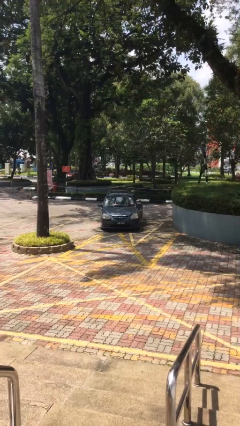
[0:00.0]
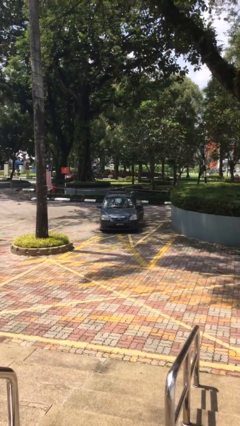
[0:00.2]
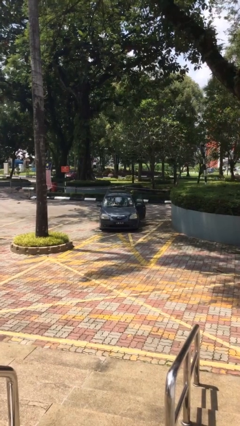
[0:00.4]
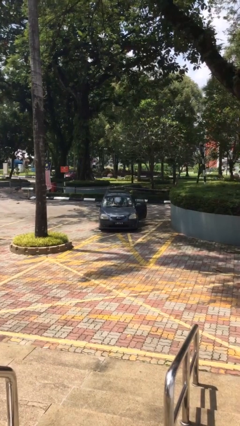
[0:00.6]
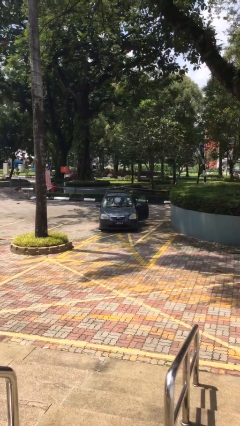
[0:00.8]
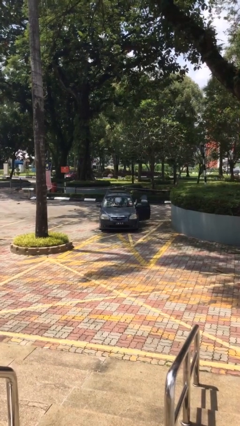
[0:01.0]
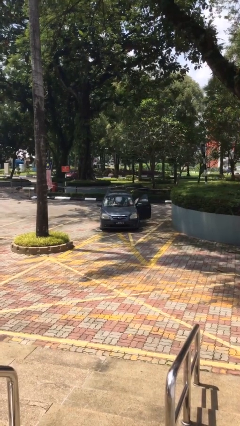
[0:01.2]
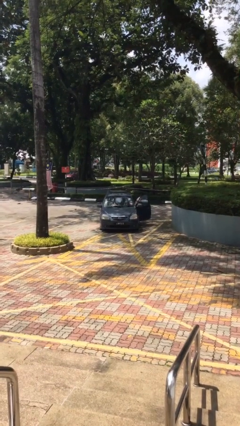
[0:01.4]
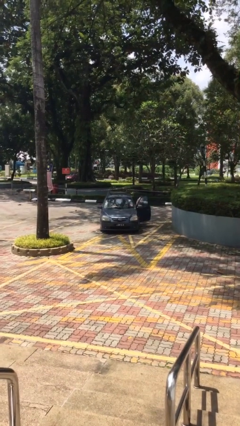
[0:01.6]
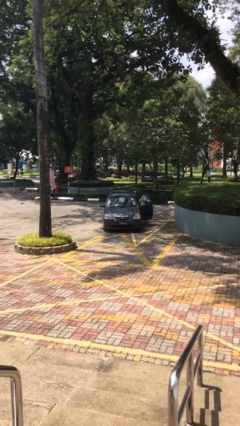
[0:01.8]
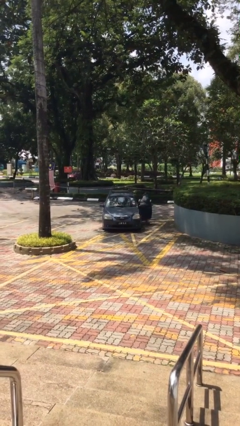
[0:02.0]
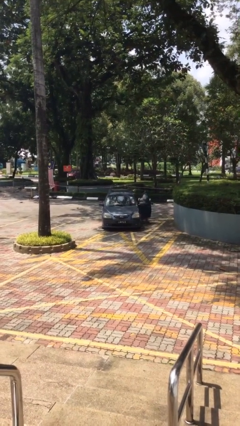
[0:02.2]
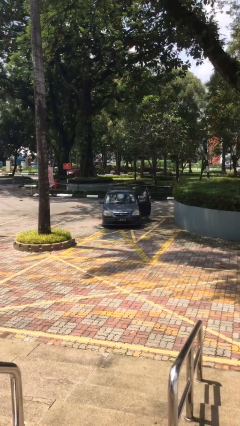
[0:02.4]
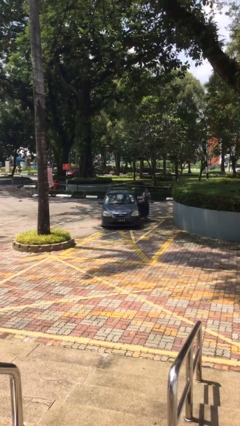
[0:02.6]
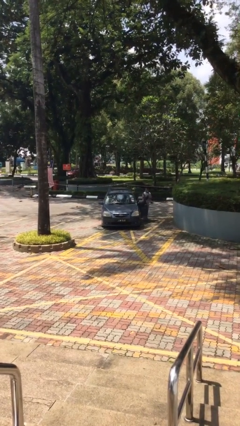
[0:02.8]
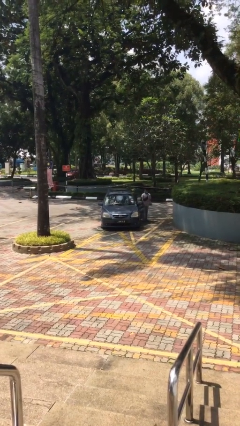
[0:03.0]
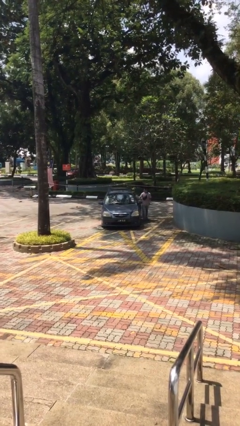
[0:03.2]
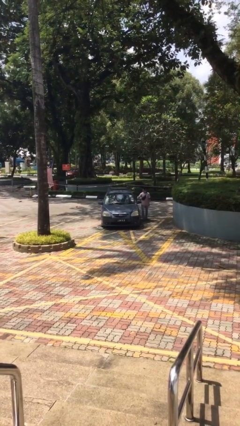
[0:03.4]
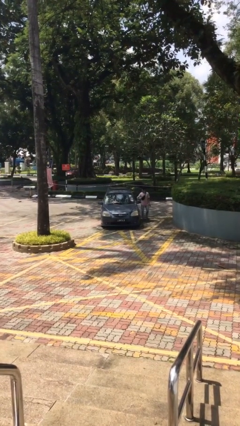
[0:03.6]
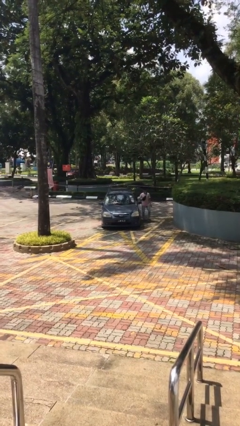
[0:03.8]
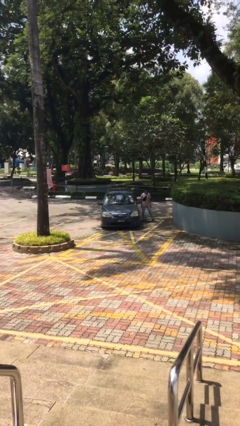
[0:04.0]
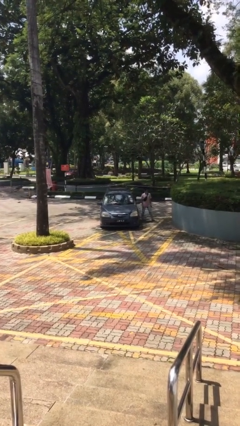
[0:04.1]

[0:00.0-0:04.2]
car drops off person

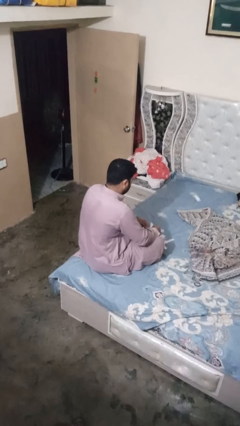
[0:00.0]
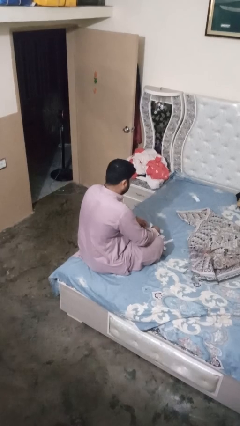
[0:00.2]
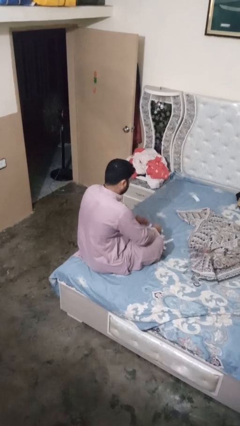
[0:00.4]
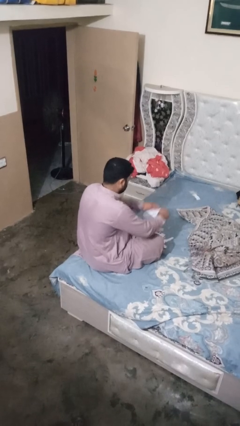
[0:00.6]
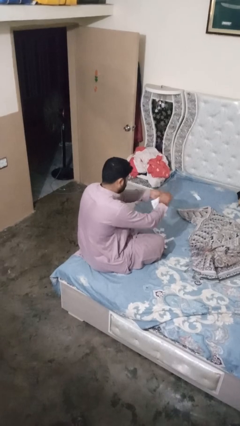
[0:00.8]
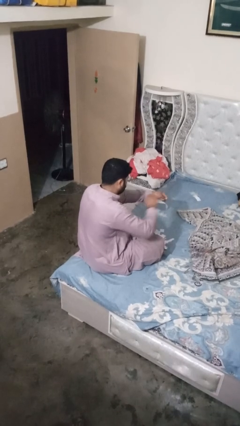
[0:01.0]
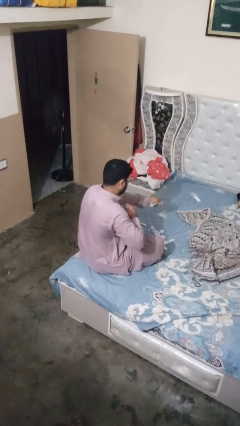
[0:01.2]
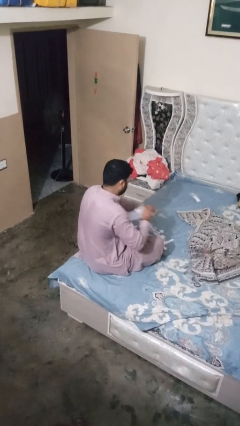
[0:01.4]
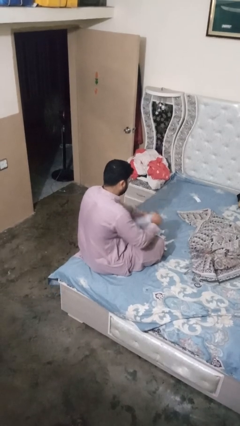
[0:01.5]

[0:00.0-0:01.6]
person tears paper

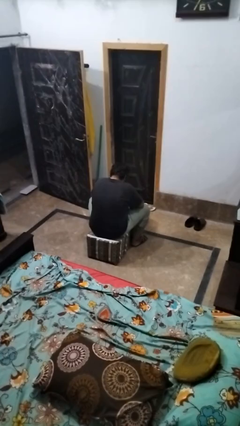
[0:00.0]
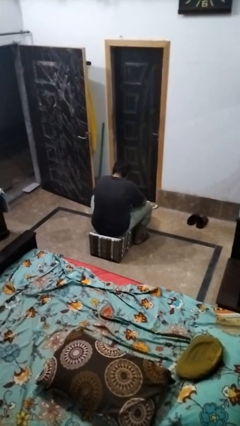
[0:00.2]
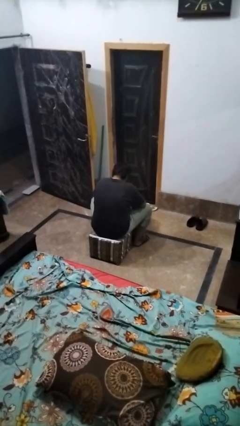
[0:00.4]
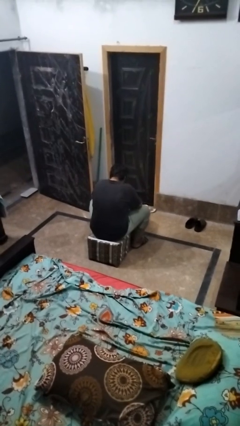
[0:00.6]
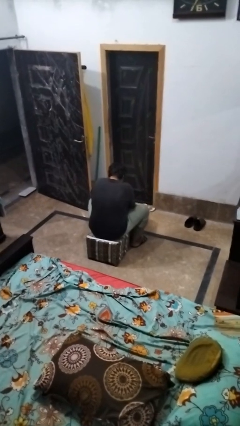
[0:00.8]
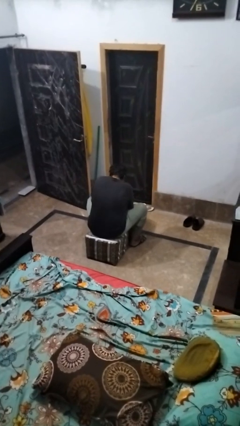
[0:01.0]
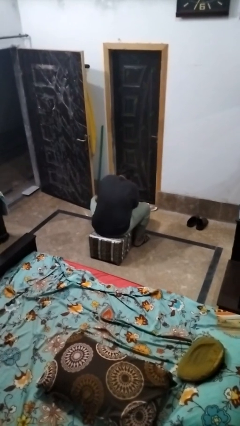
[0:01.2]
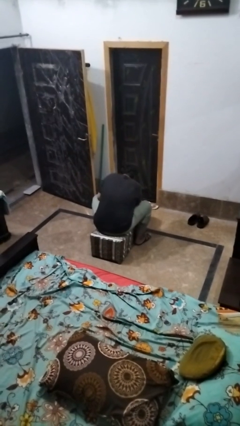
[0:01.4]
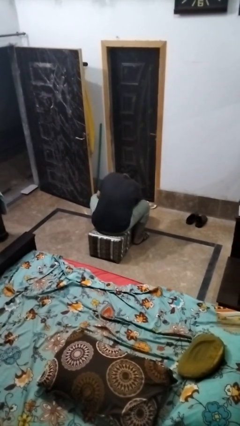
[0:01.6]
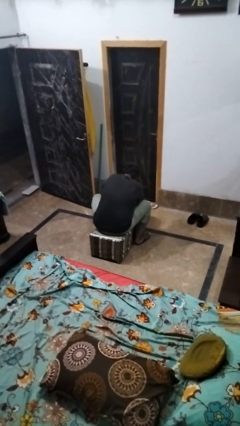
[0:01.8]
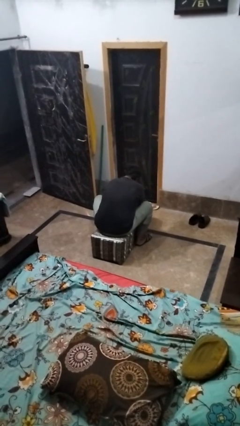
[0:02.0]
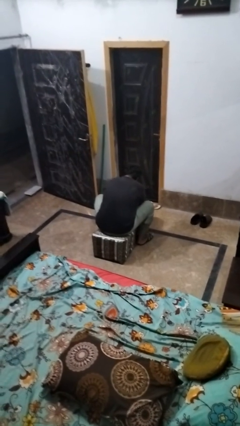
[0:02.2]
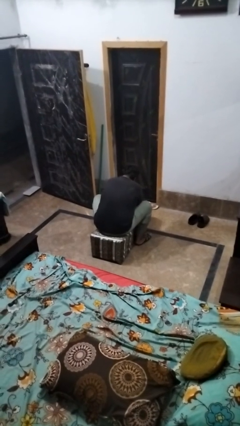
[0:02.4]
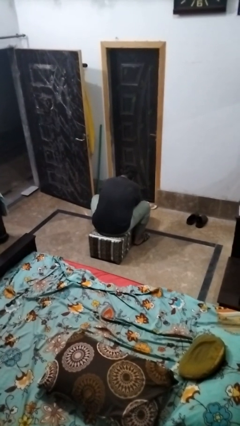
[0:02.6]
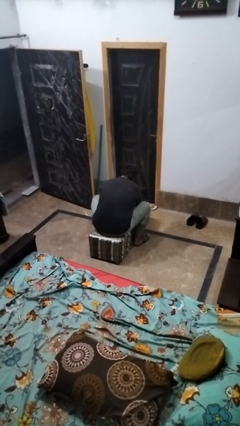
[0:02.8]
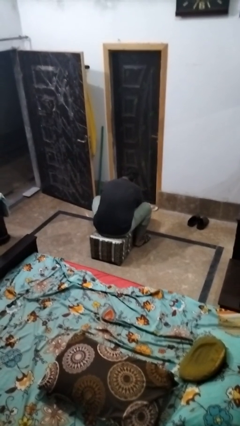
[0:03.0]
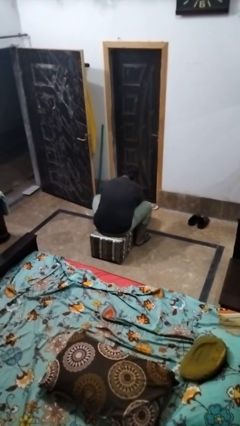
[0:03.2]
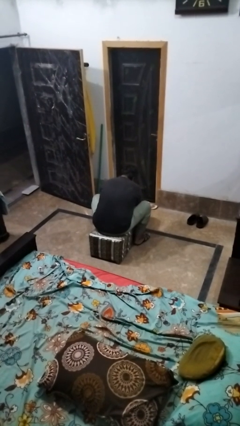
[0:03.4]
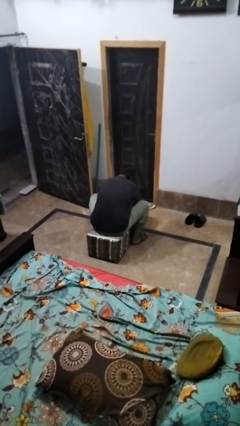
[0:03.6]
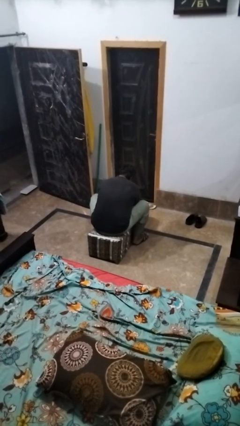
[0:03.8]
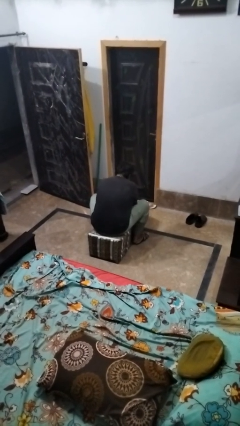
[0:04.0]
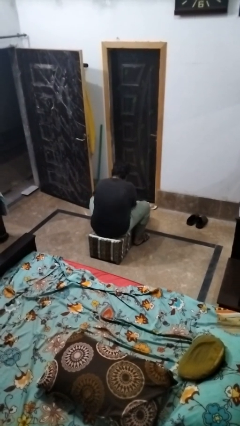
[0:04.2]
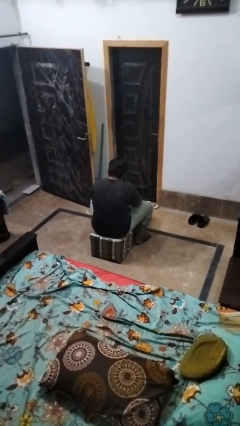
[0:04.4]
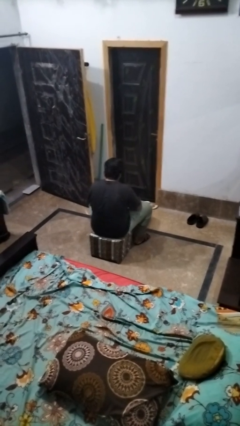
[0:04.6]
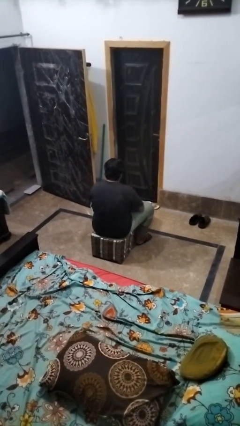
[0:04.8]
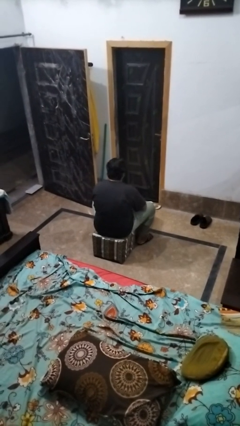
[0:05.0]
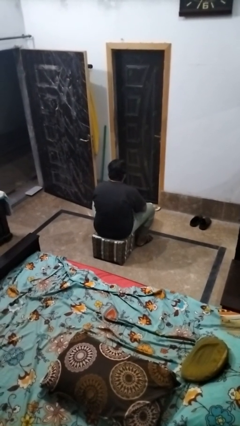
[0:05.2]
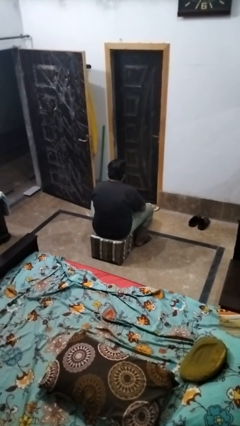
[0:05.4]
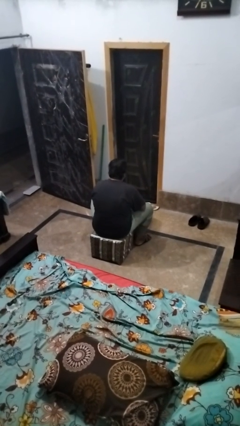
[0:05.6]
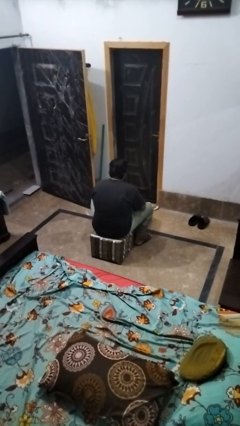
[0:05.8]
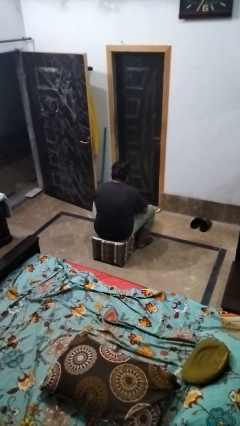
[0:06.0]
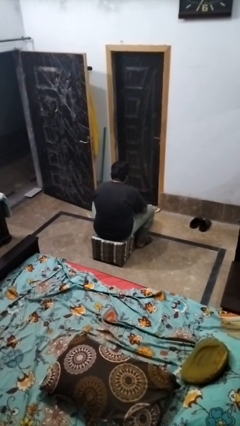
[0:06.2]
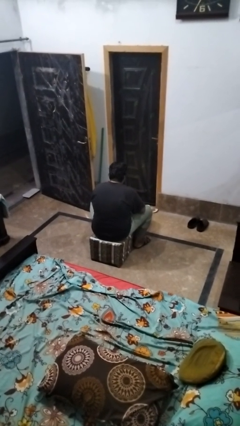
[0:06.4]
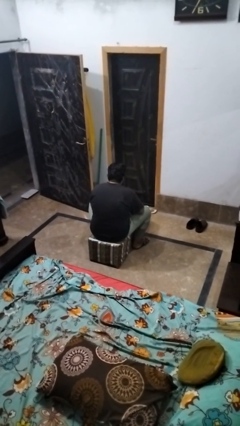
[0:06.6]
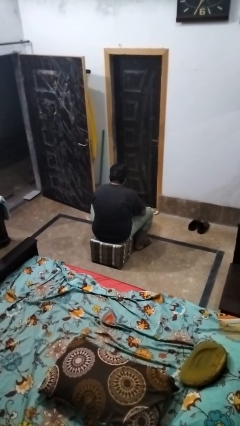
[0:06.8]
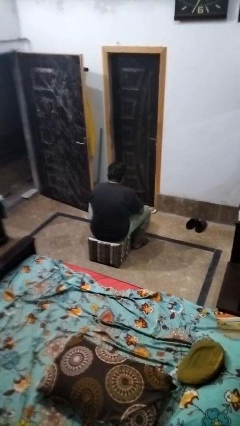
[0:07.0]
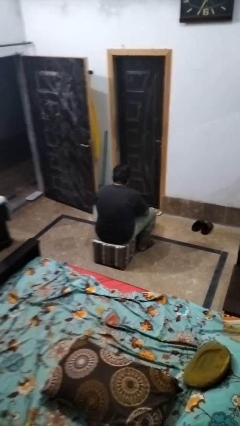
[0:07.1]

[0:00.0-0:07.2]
person searches in box

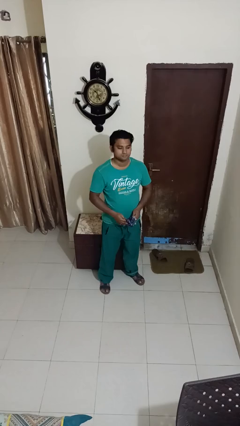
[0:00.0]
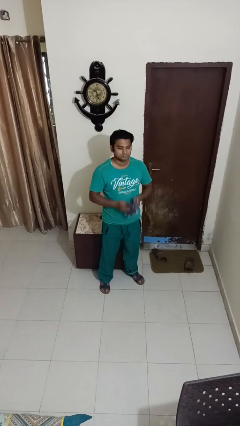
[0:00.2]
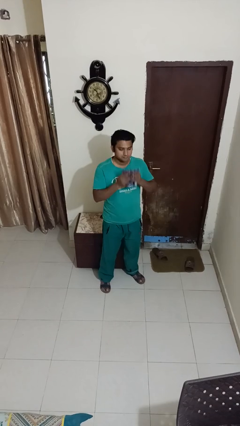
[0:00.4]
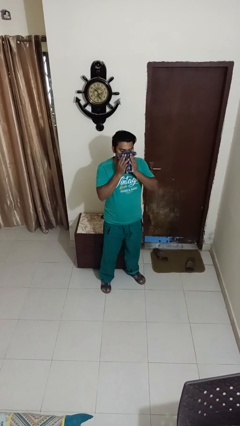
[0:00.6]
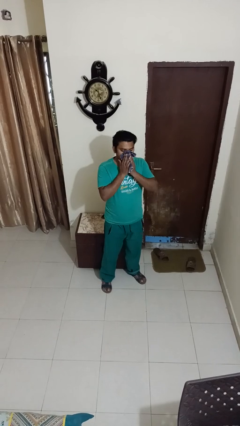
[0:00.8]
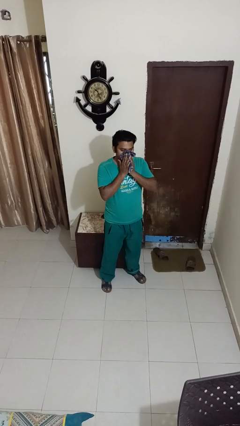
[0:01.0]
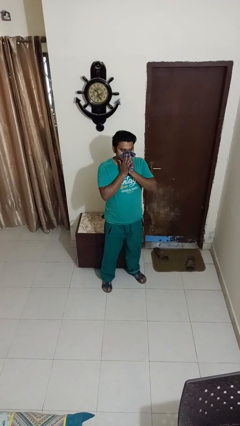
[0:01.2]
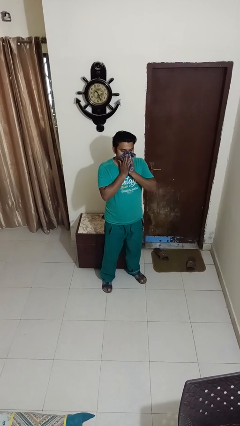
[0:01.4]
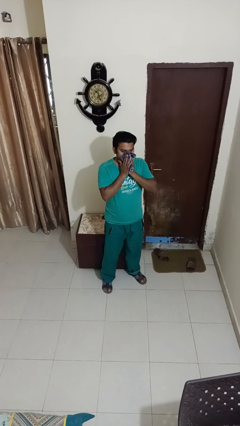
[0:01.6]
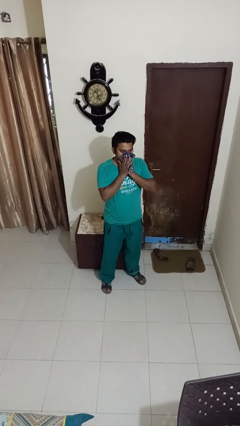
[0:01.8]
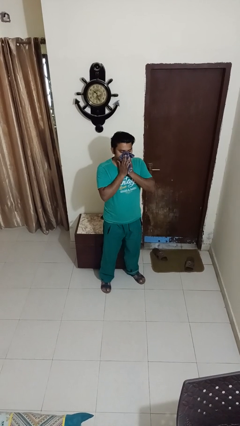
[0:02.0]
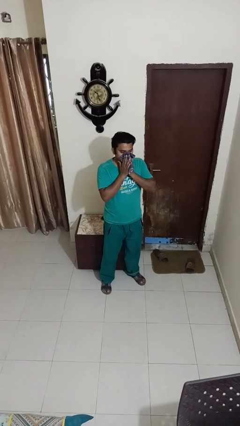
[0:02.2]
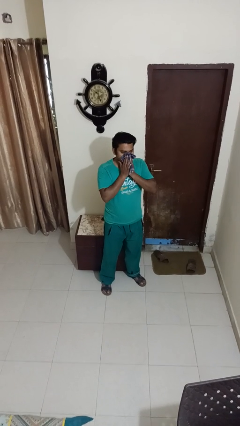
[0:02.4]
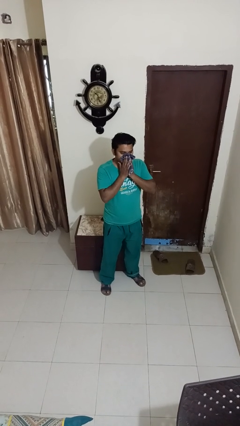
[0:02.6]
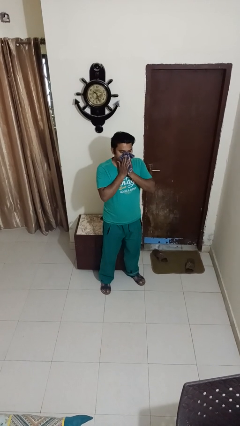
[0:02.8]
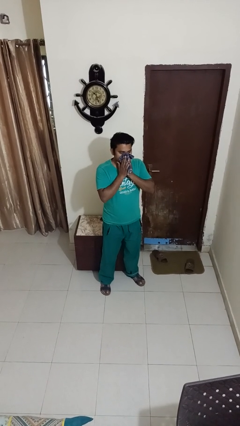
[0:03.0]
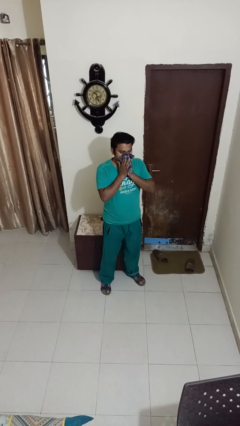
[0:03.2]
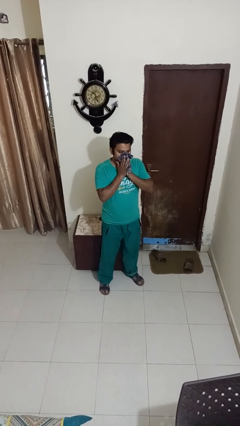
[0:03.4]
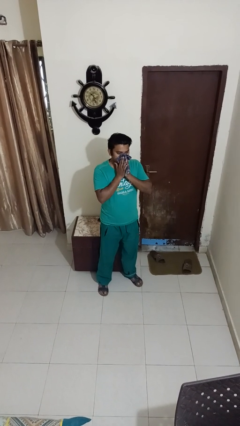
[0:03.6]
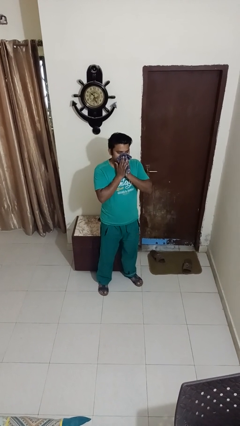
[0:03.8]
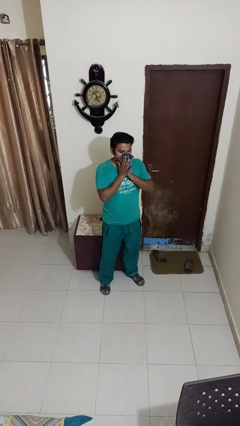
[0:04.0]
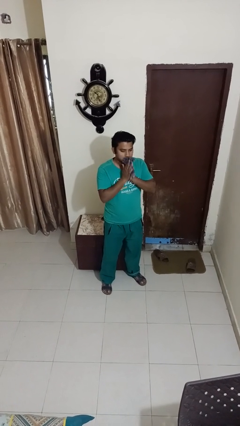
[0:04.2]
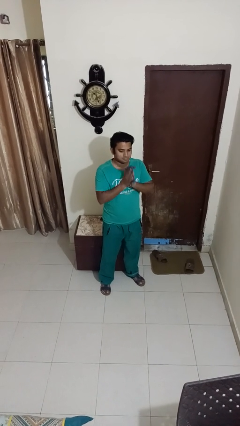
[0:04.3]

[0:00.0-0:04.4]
person blows nose

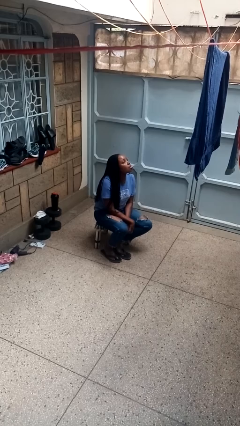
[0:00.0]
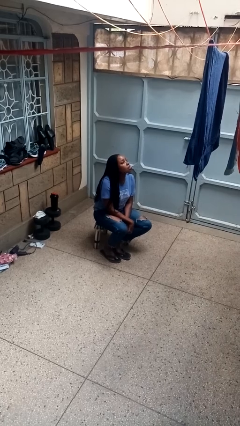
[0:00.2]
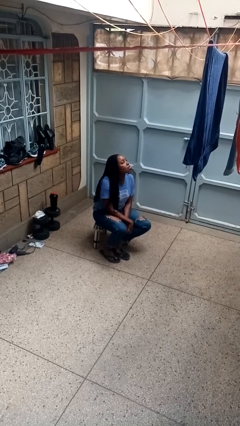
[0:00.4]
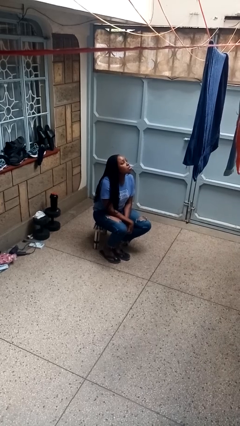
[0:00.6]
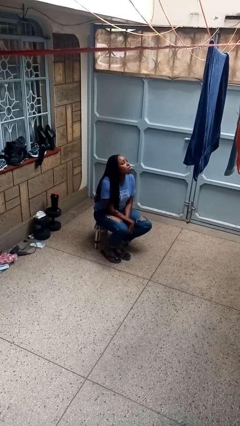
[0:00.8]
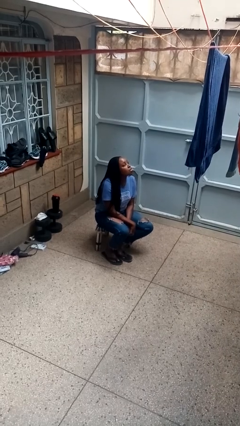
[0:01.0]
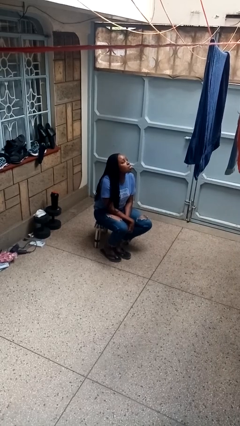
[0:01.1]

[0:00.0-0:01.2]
person sticks out tongue
